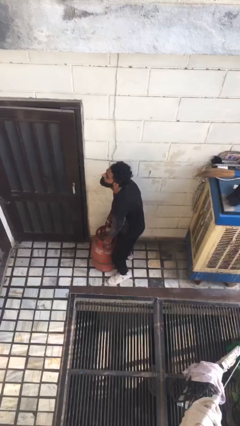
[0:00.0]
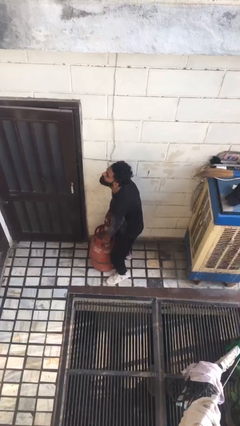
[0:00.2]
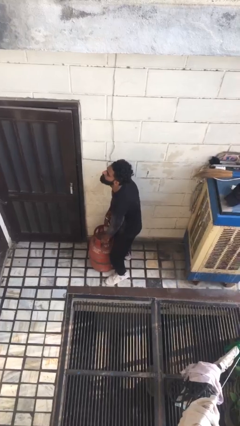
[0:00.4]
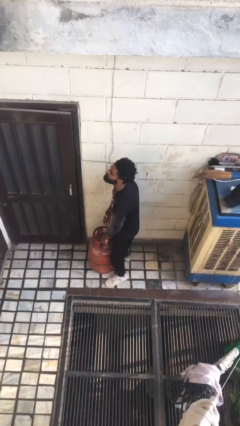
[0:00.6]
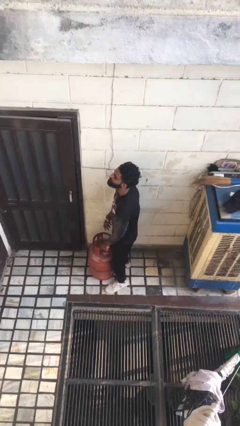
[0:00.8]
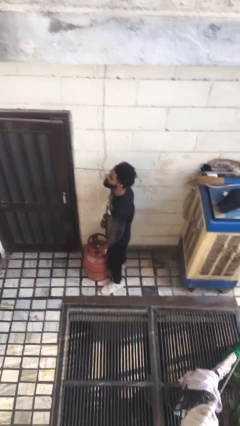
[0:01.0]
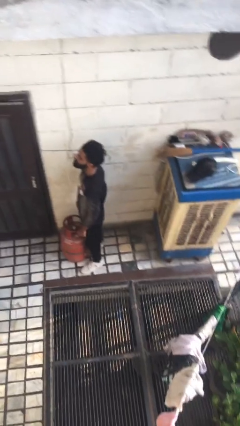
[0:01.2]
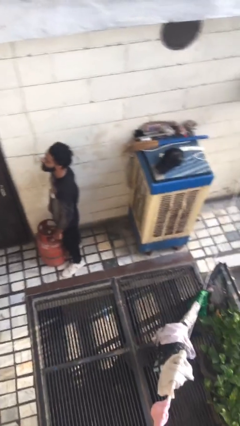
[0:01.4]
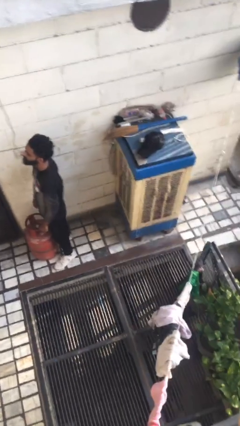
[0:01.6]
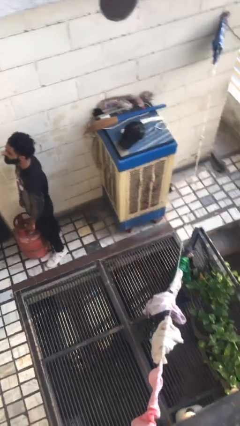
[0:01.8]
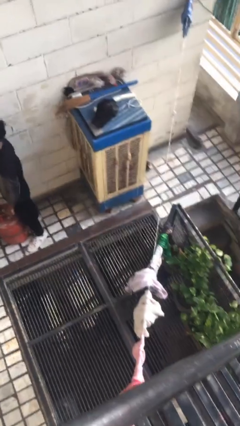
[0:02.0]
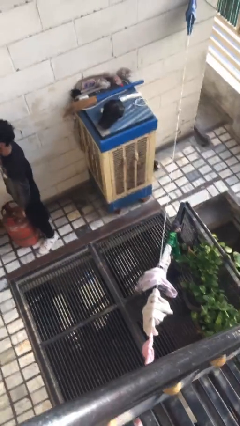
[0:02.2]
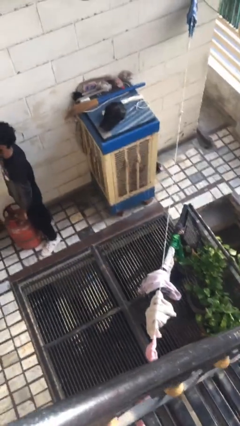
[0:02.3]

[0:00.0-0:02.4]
person puts down object on floor

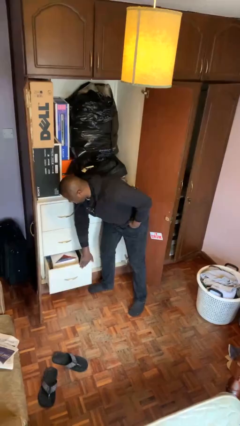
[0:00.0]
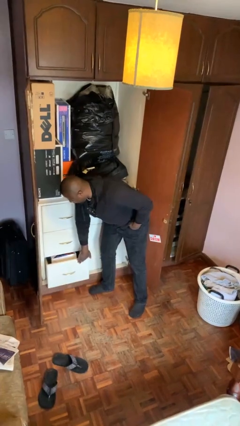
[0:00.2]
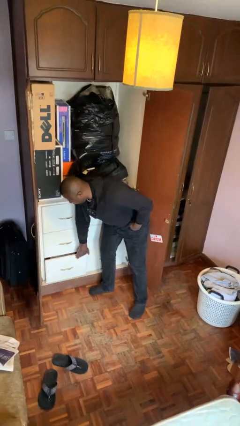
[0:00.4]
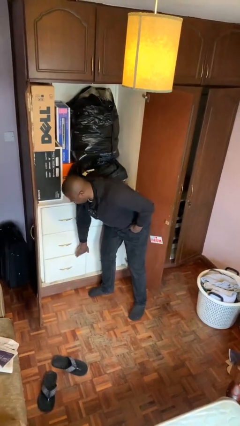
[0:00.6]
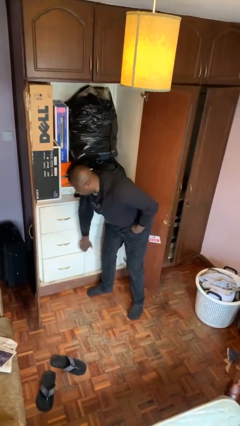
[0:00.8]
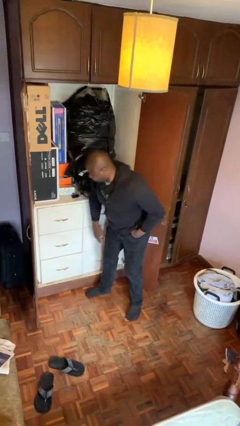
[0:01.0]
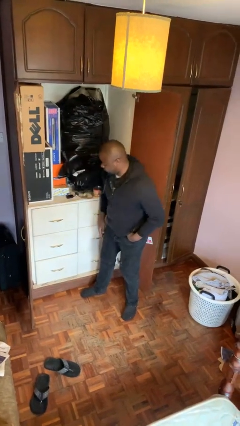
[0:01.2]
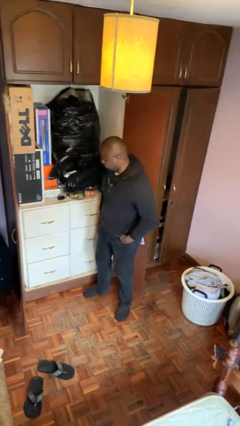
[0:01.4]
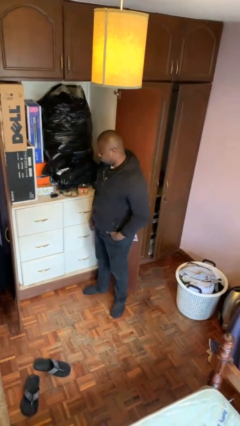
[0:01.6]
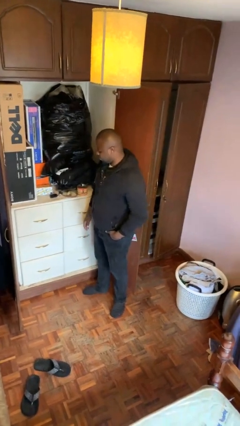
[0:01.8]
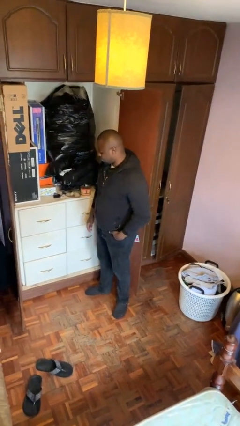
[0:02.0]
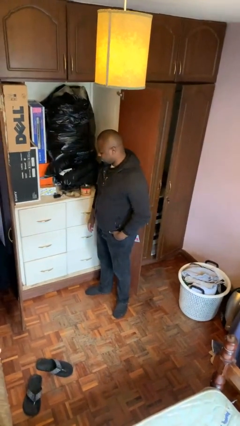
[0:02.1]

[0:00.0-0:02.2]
person closes dresser drawer

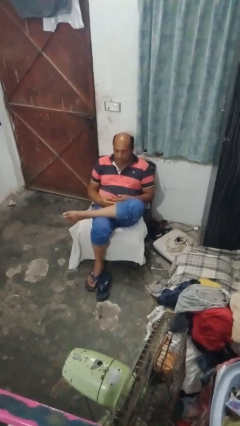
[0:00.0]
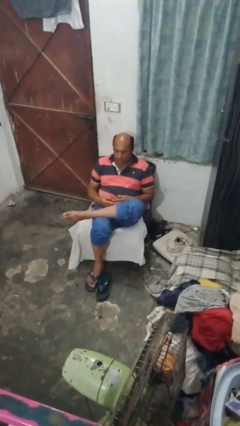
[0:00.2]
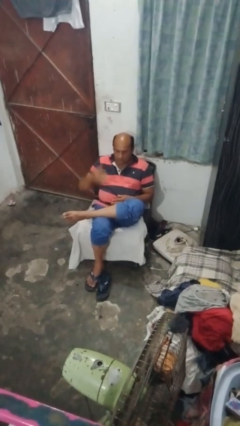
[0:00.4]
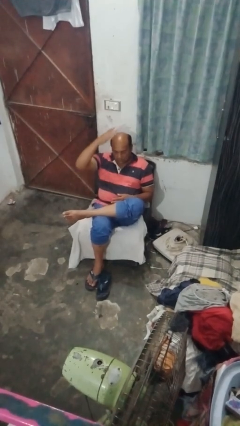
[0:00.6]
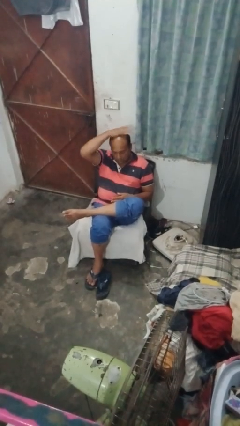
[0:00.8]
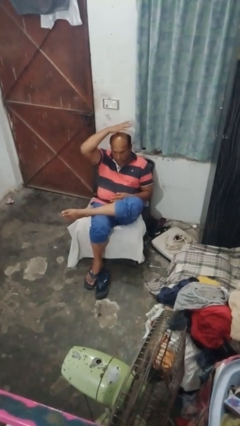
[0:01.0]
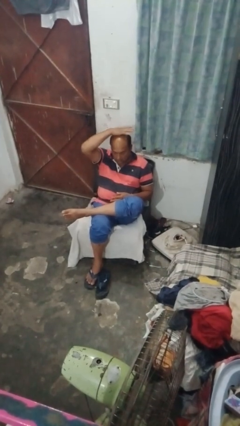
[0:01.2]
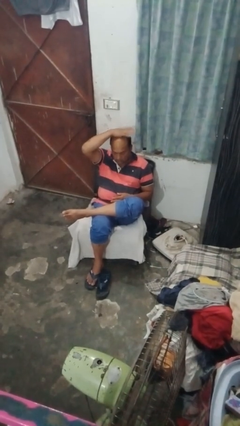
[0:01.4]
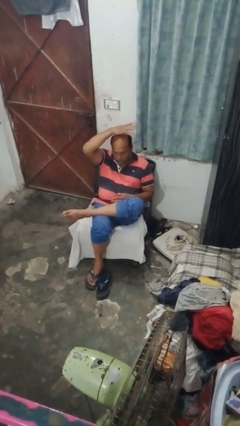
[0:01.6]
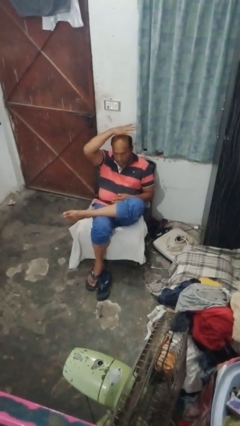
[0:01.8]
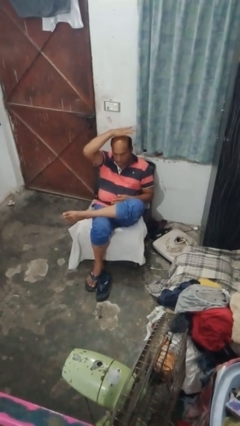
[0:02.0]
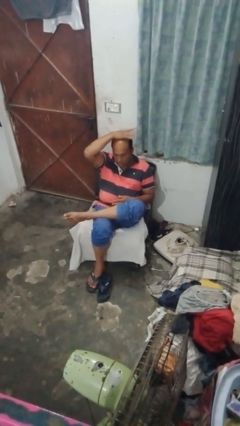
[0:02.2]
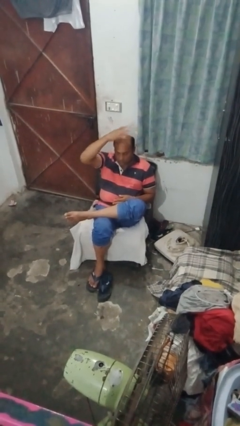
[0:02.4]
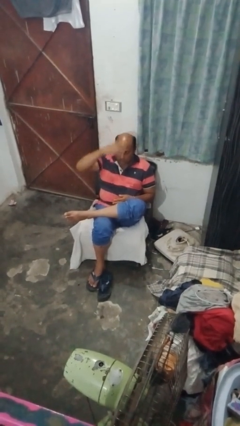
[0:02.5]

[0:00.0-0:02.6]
person pats head

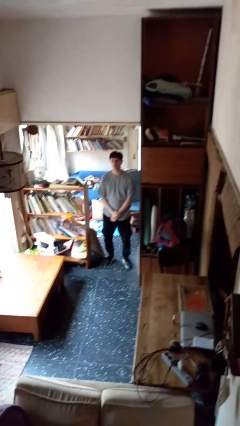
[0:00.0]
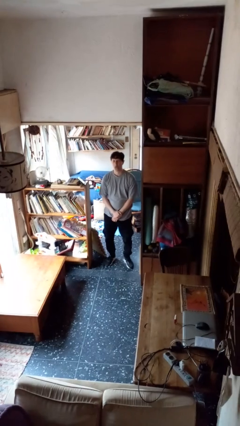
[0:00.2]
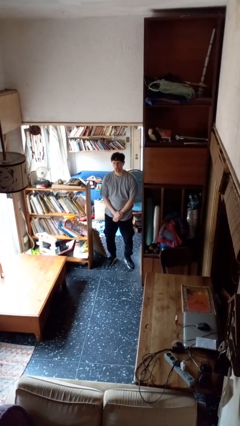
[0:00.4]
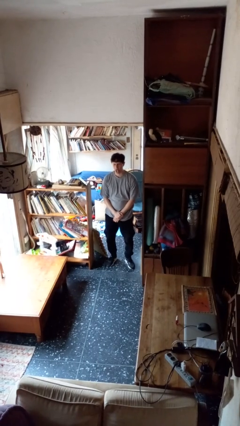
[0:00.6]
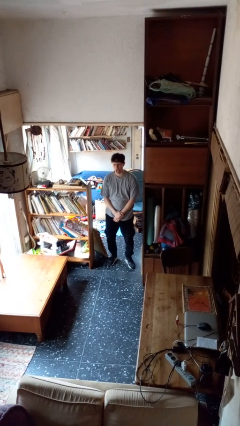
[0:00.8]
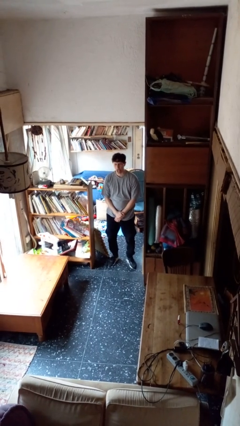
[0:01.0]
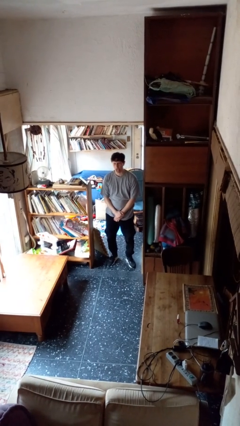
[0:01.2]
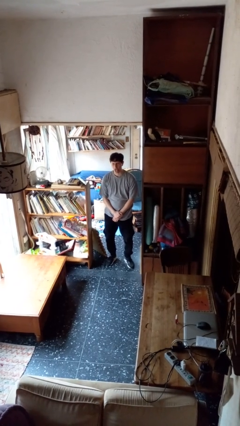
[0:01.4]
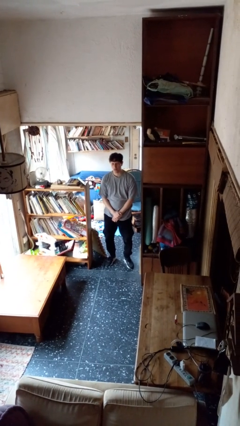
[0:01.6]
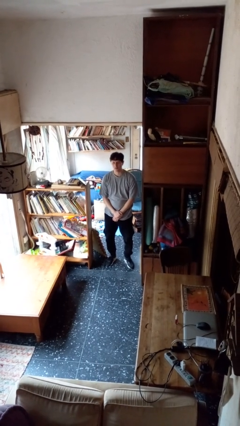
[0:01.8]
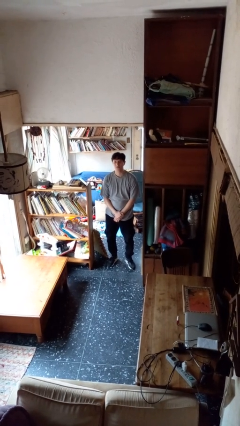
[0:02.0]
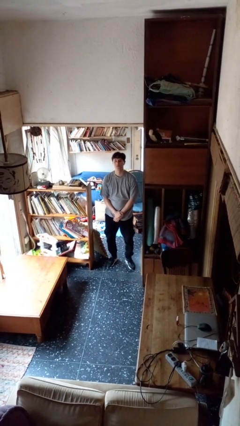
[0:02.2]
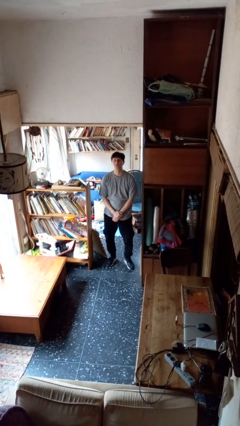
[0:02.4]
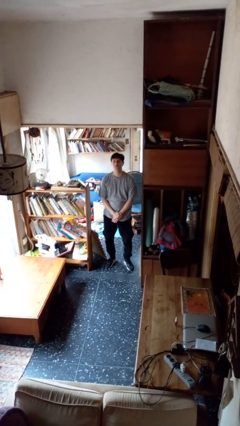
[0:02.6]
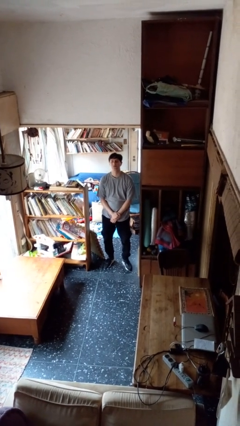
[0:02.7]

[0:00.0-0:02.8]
person sticks out tongue

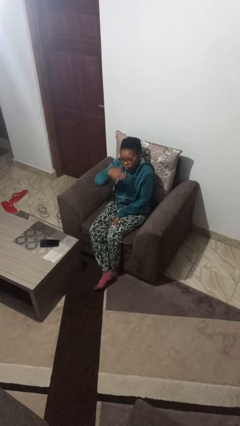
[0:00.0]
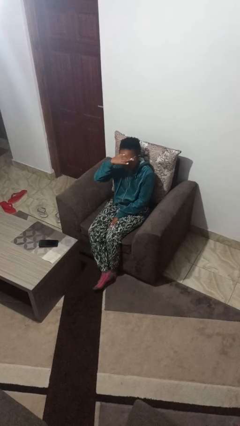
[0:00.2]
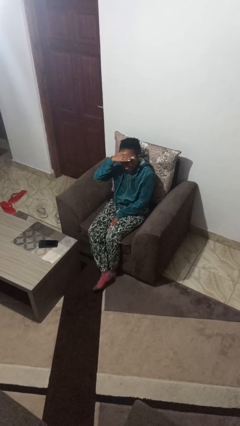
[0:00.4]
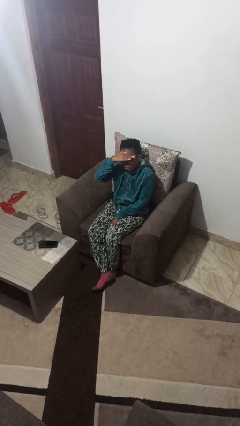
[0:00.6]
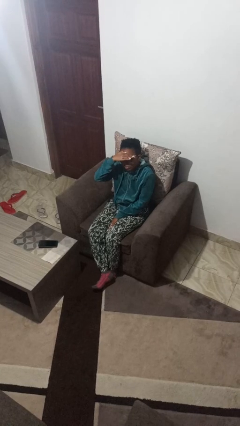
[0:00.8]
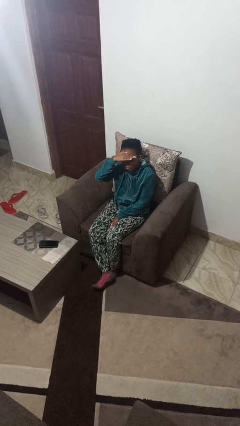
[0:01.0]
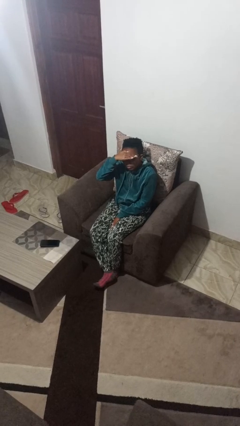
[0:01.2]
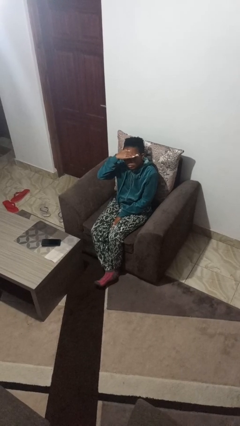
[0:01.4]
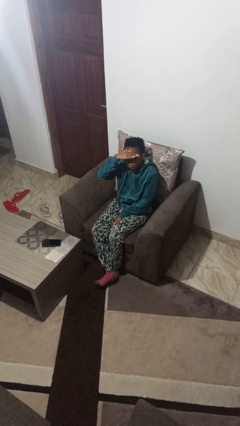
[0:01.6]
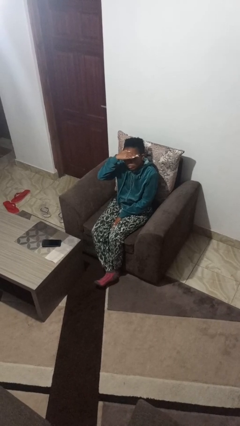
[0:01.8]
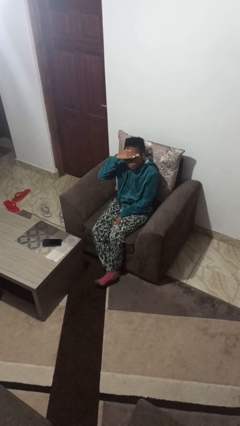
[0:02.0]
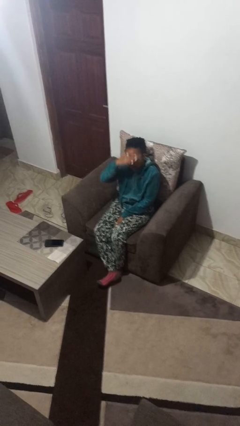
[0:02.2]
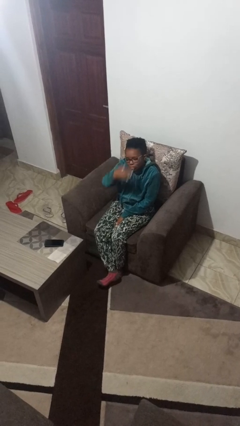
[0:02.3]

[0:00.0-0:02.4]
person shades eyes

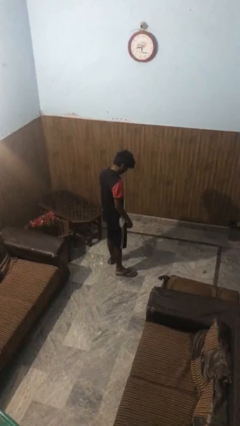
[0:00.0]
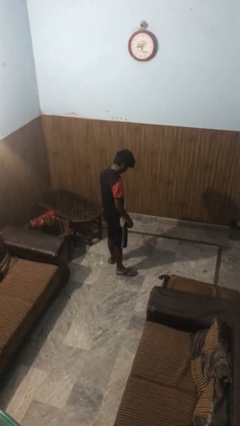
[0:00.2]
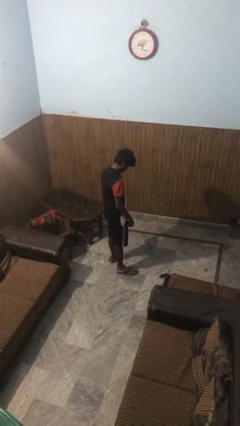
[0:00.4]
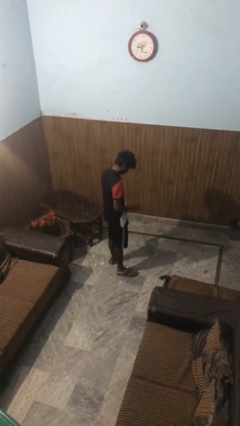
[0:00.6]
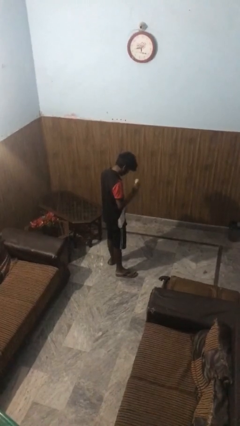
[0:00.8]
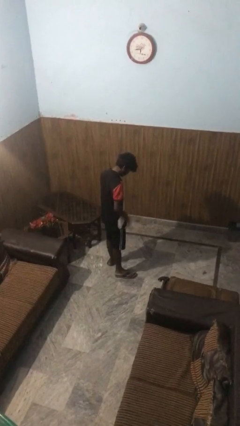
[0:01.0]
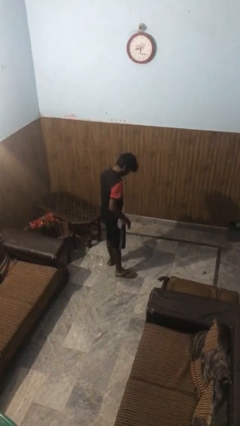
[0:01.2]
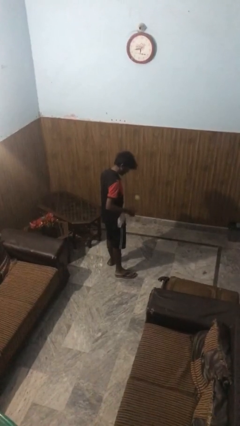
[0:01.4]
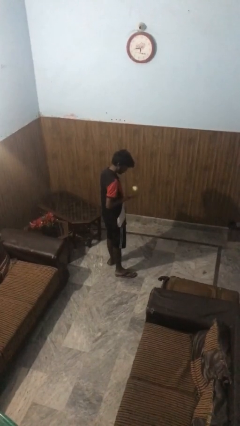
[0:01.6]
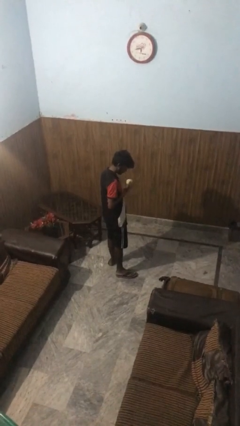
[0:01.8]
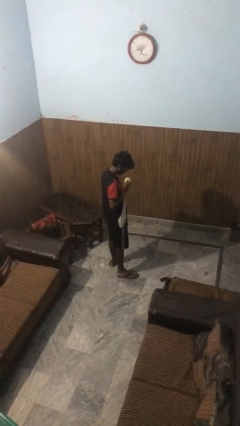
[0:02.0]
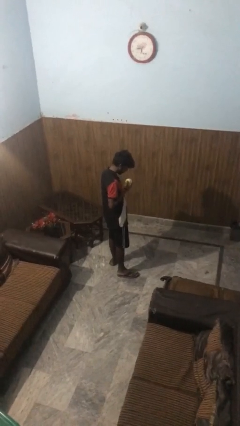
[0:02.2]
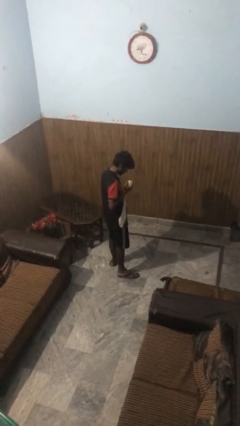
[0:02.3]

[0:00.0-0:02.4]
person bounces ball on floor

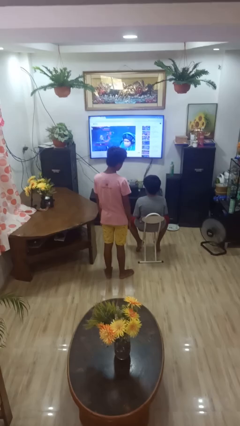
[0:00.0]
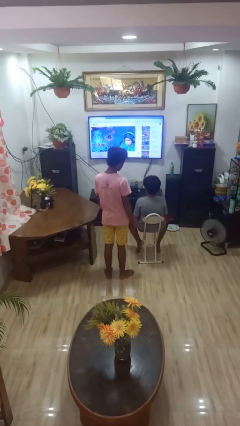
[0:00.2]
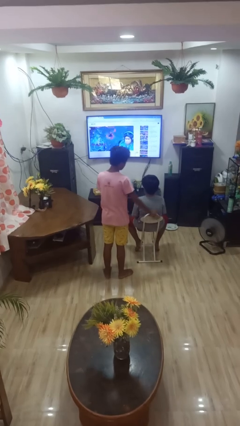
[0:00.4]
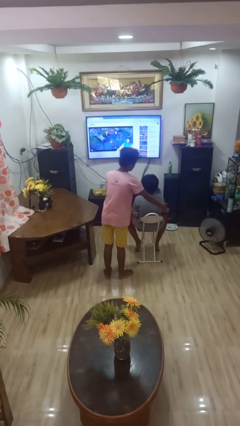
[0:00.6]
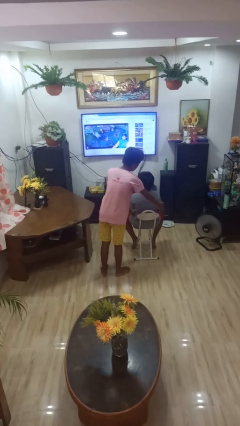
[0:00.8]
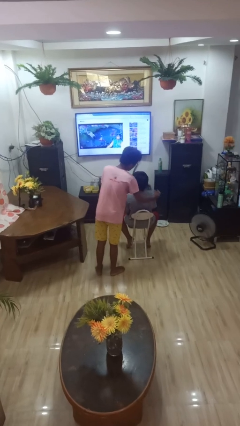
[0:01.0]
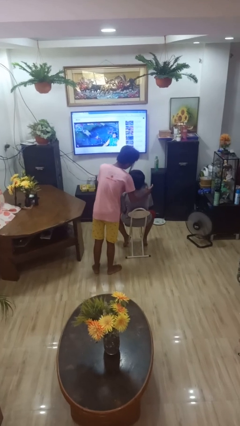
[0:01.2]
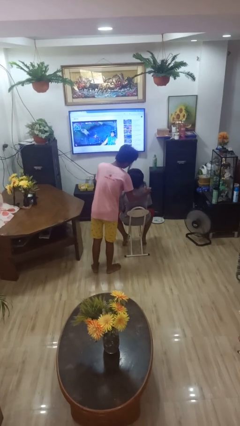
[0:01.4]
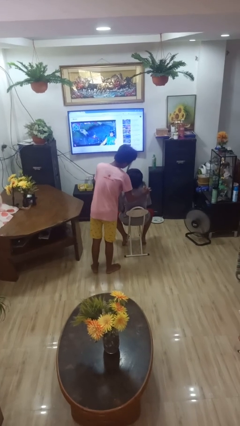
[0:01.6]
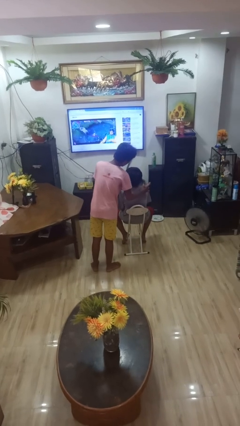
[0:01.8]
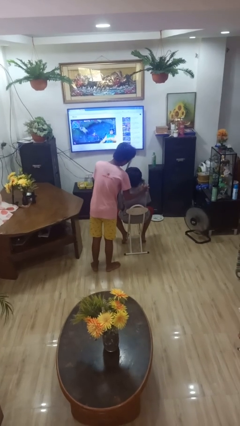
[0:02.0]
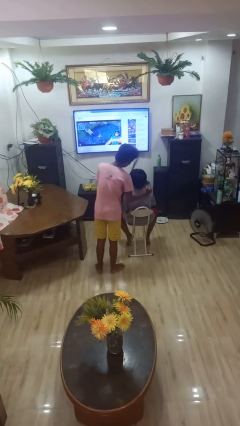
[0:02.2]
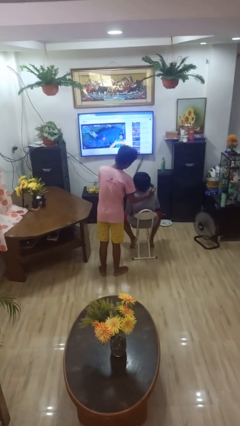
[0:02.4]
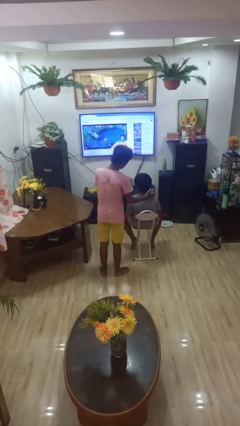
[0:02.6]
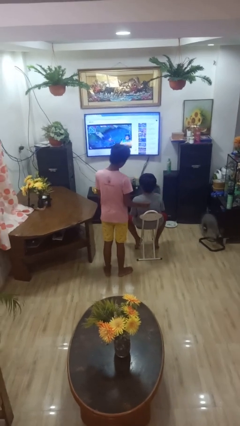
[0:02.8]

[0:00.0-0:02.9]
person tickles person
